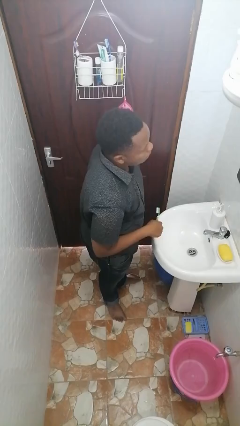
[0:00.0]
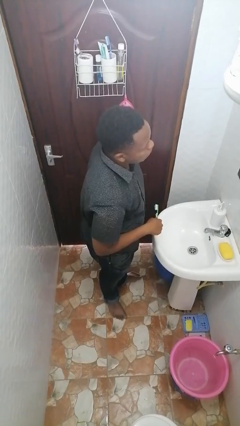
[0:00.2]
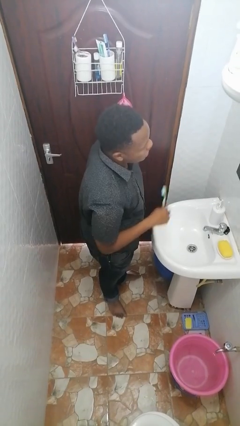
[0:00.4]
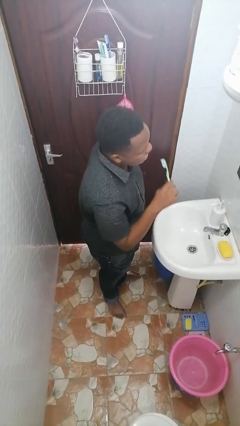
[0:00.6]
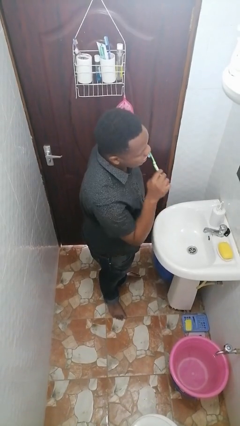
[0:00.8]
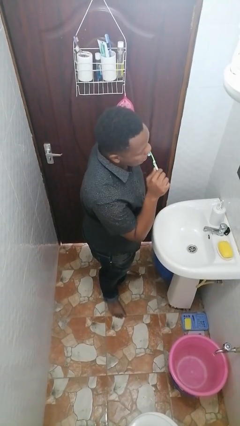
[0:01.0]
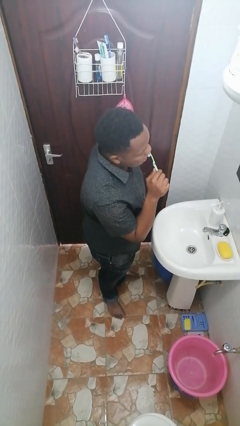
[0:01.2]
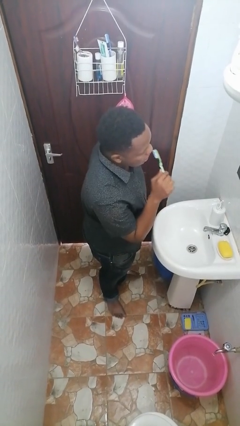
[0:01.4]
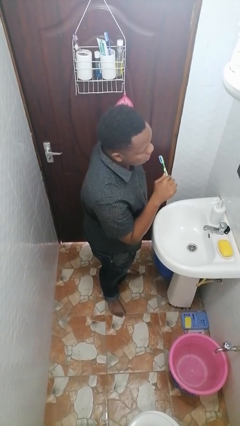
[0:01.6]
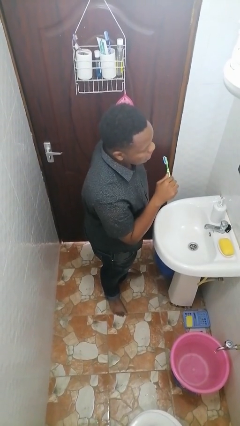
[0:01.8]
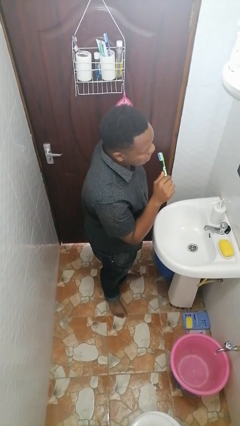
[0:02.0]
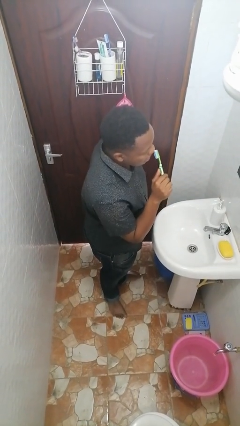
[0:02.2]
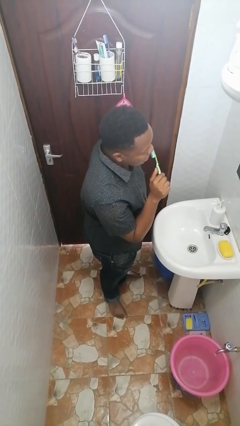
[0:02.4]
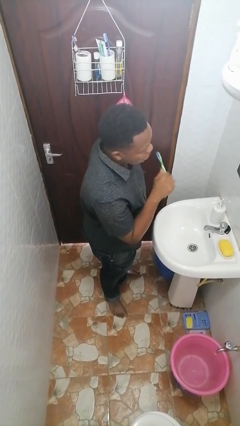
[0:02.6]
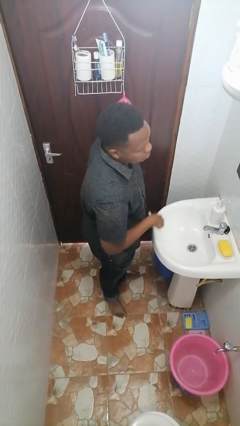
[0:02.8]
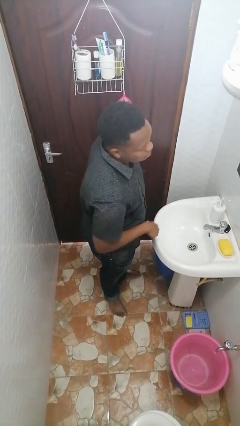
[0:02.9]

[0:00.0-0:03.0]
person brushes teeth

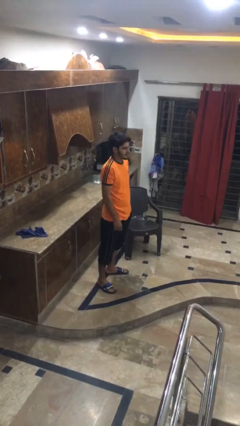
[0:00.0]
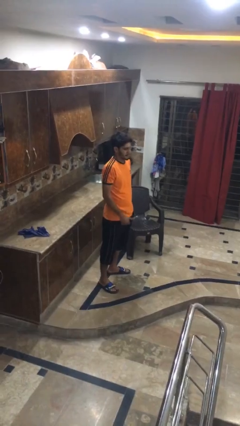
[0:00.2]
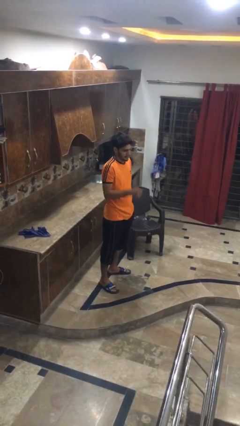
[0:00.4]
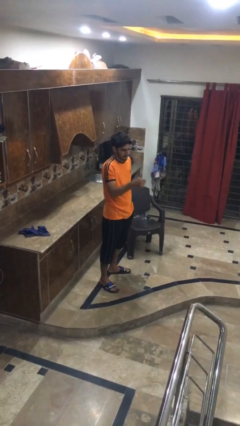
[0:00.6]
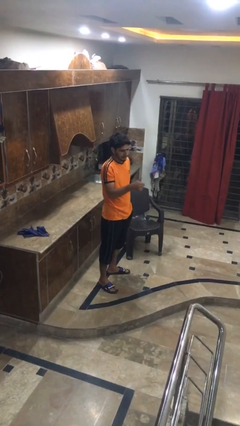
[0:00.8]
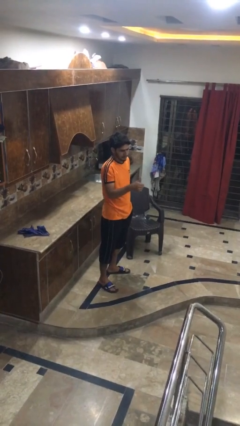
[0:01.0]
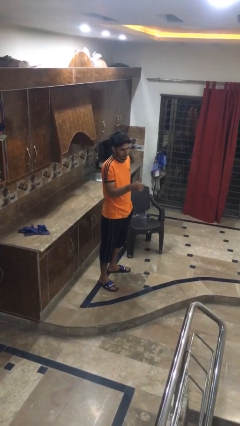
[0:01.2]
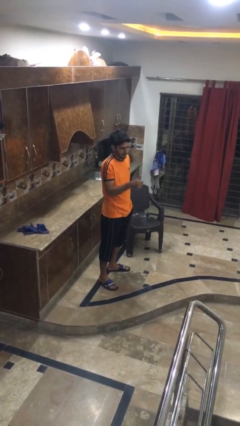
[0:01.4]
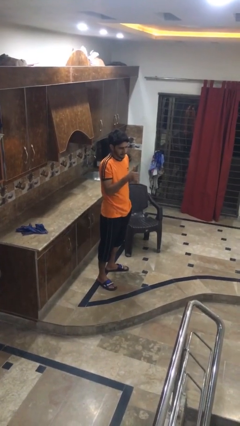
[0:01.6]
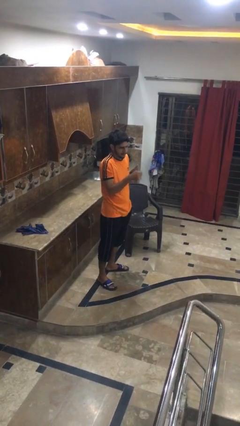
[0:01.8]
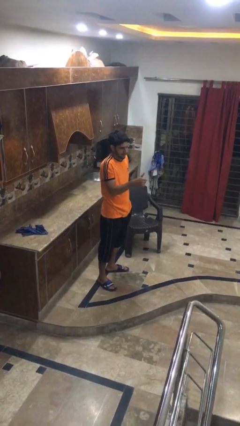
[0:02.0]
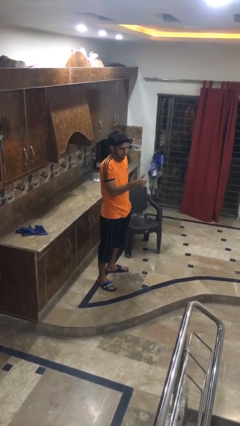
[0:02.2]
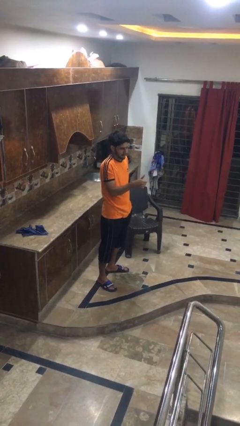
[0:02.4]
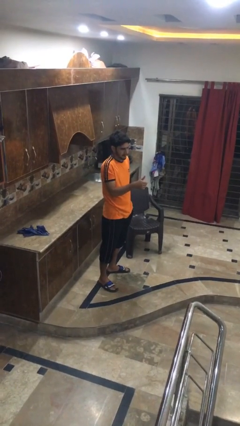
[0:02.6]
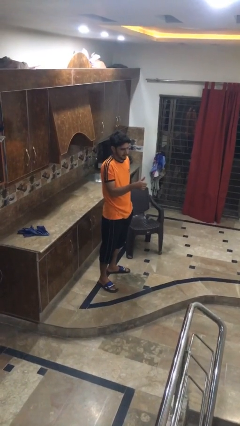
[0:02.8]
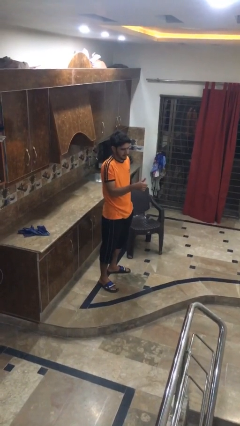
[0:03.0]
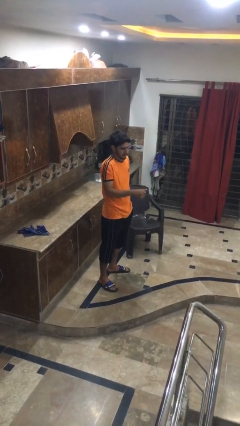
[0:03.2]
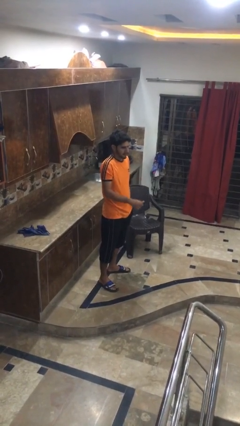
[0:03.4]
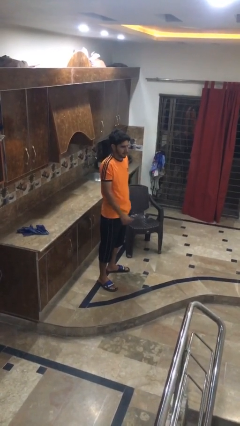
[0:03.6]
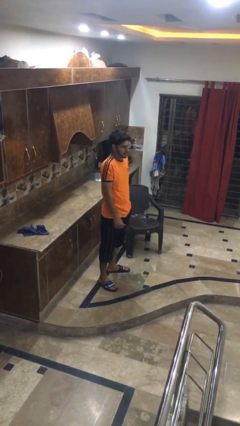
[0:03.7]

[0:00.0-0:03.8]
person gestures thumbs up

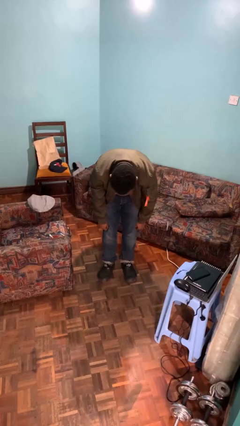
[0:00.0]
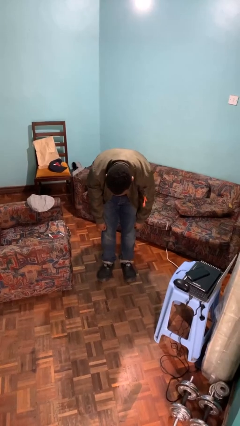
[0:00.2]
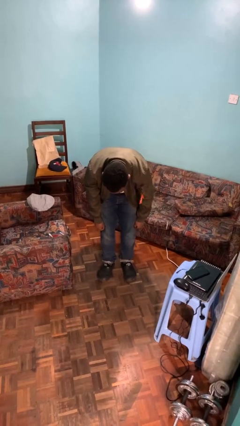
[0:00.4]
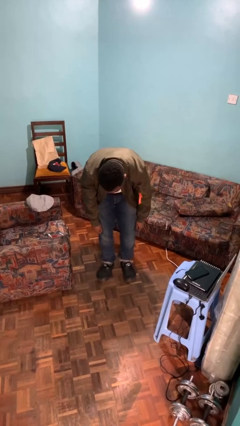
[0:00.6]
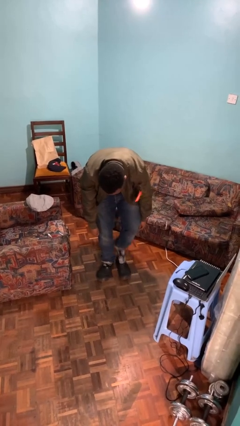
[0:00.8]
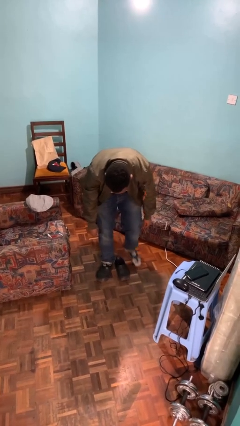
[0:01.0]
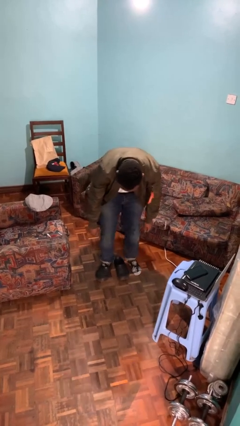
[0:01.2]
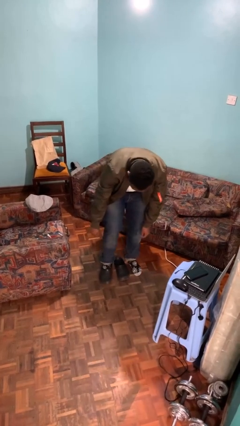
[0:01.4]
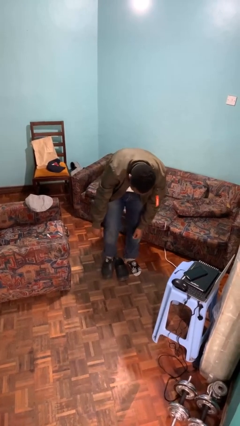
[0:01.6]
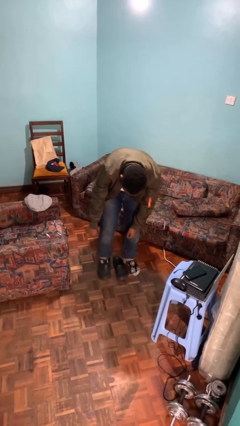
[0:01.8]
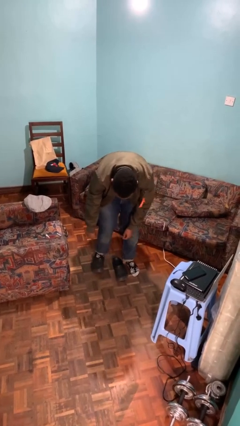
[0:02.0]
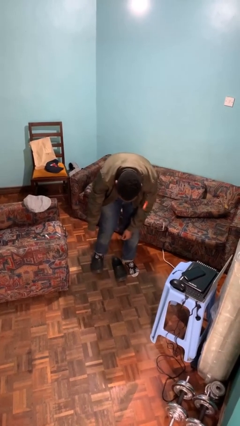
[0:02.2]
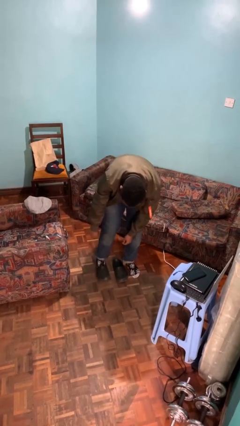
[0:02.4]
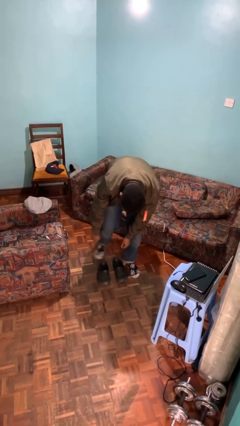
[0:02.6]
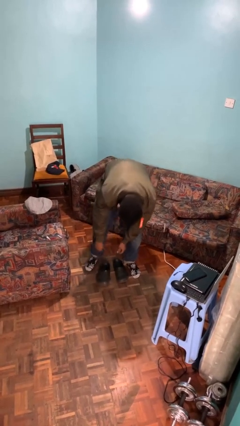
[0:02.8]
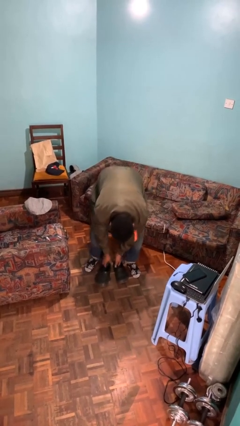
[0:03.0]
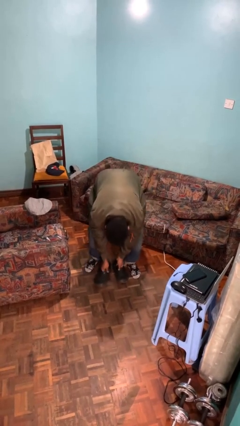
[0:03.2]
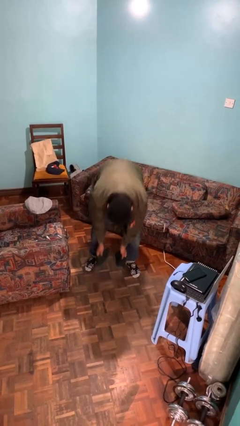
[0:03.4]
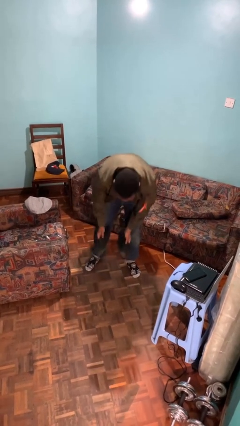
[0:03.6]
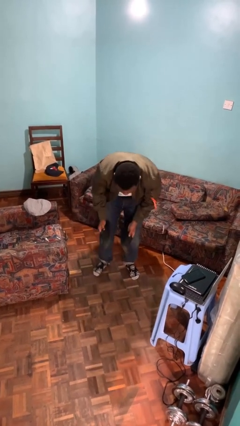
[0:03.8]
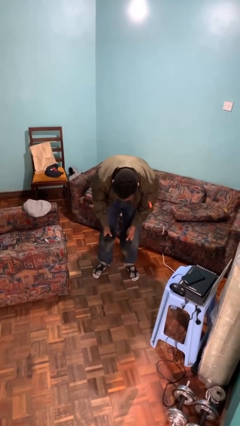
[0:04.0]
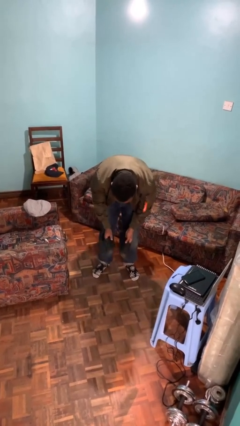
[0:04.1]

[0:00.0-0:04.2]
person takes off shoes

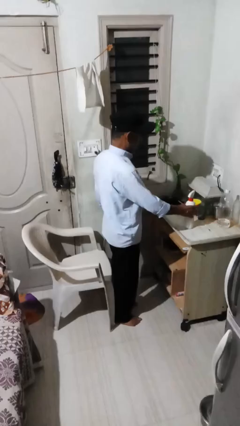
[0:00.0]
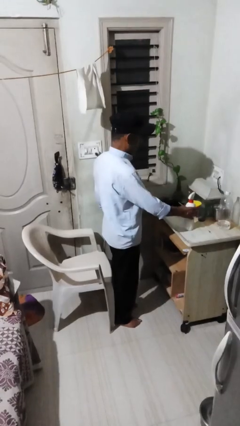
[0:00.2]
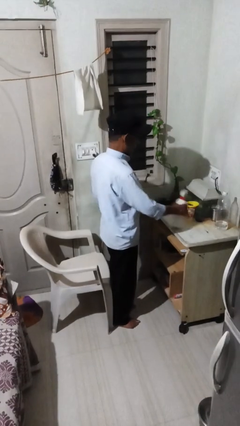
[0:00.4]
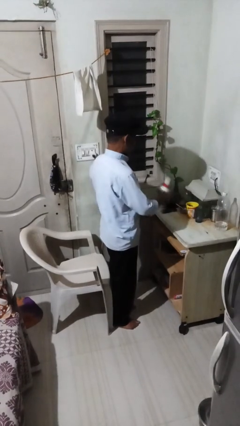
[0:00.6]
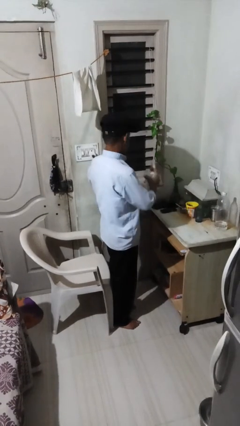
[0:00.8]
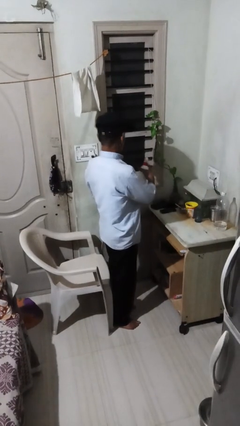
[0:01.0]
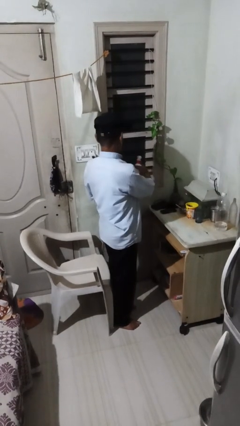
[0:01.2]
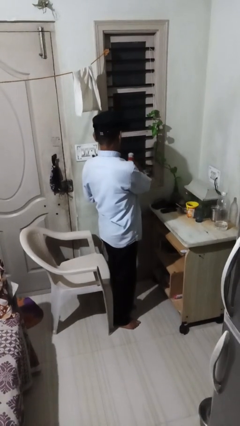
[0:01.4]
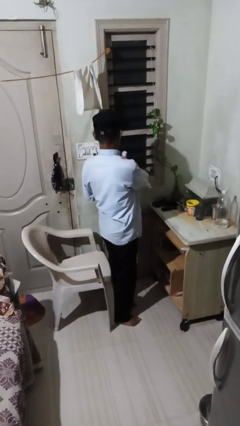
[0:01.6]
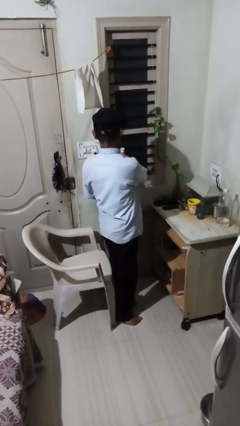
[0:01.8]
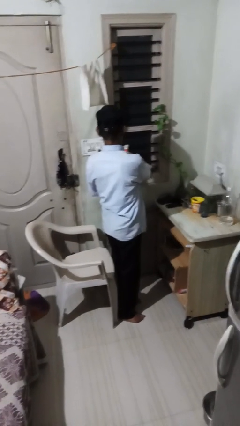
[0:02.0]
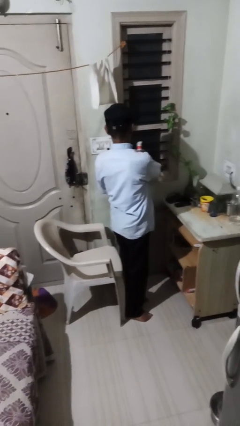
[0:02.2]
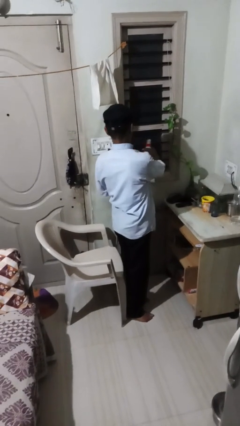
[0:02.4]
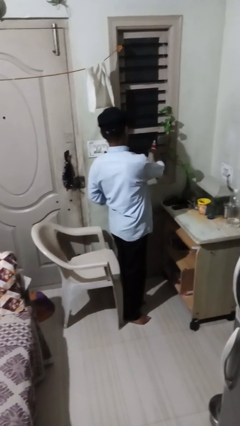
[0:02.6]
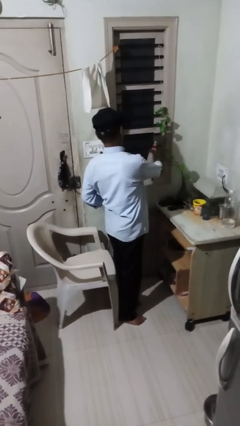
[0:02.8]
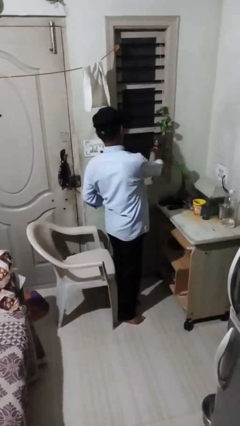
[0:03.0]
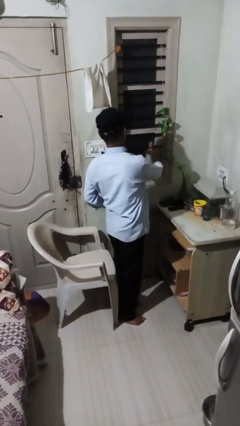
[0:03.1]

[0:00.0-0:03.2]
person sprays from bottle

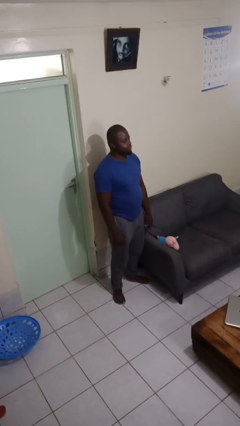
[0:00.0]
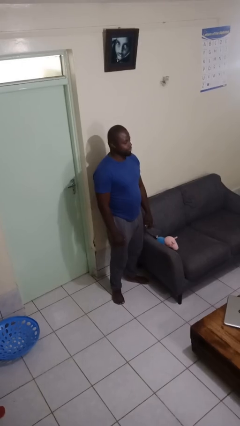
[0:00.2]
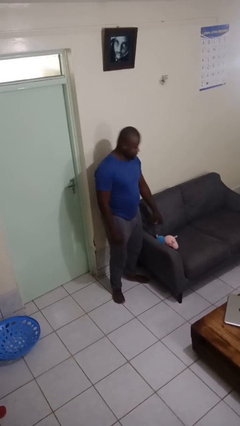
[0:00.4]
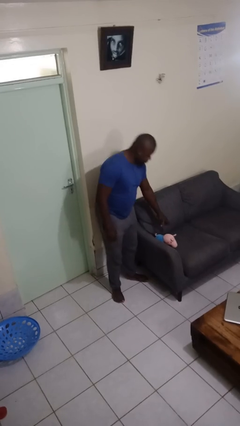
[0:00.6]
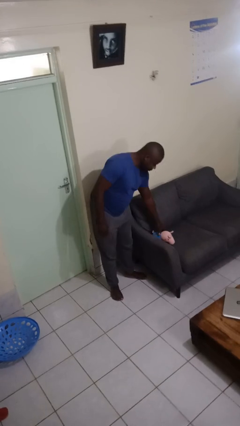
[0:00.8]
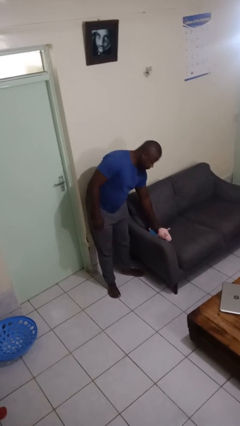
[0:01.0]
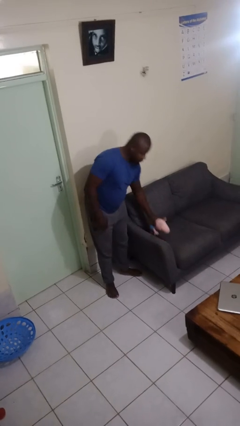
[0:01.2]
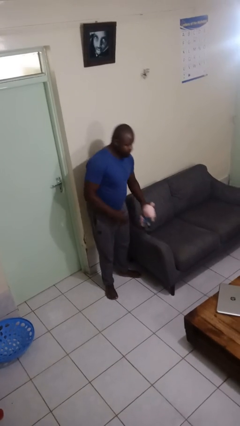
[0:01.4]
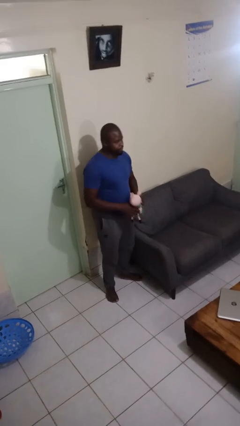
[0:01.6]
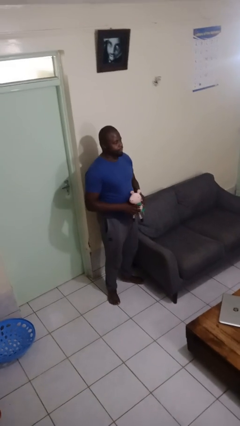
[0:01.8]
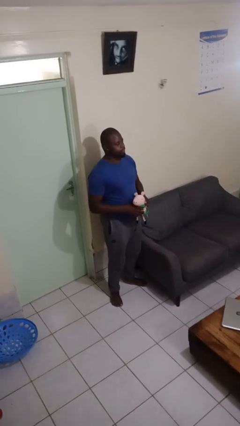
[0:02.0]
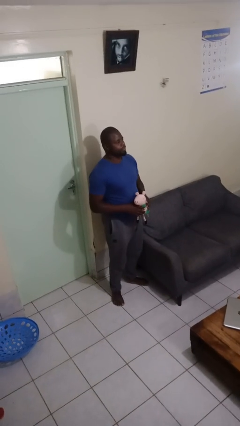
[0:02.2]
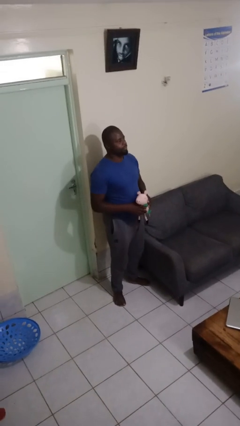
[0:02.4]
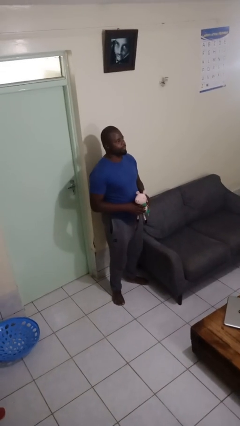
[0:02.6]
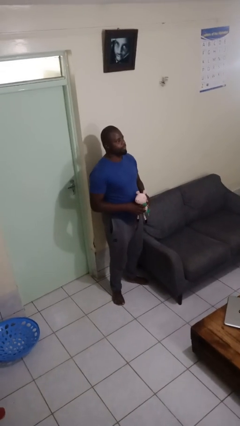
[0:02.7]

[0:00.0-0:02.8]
person picks up object from couch

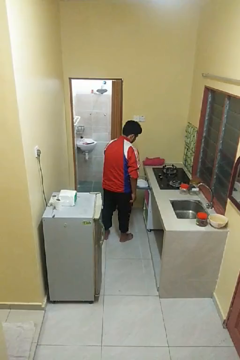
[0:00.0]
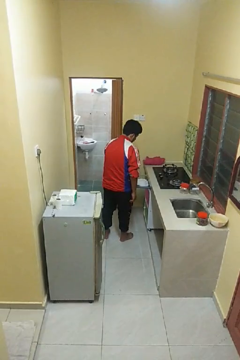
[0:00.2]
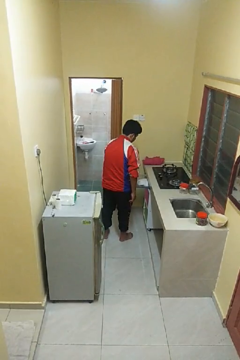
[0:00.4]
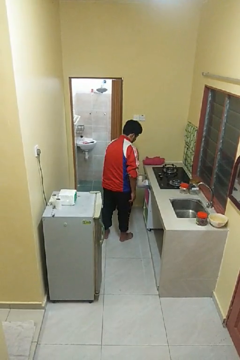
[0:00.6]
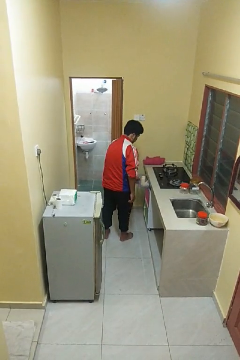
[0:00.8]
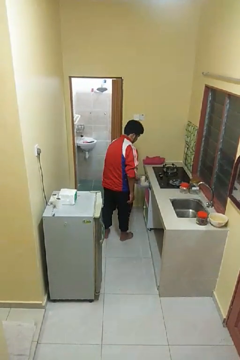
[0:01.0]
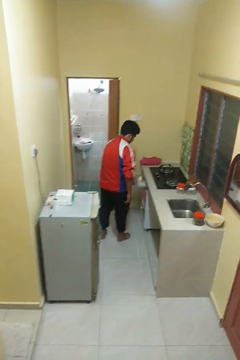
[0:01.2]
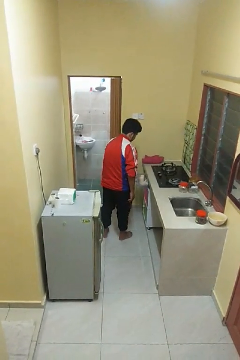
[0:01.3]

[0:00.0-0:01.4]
person closes kitchen drawer
